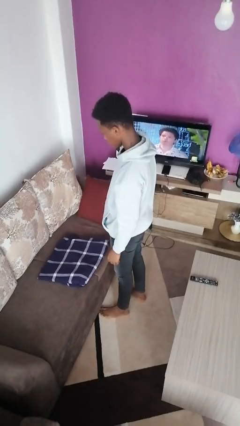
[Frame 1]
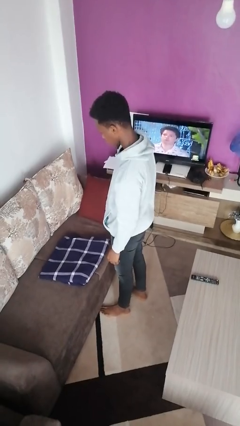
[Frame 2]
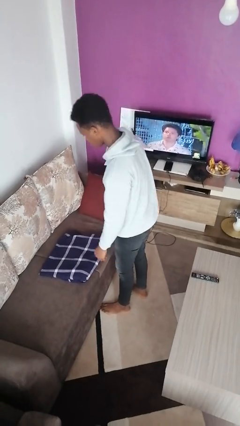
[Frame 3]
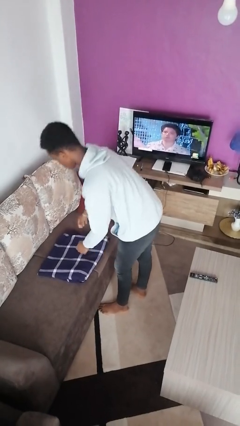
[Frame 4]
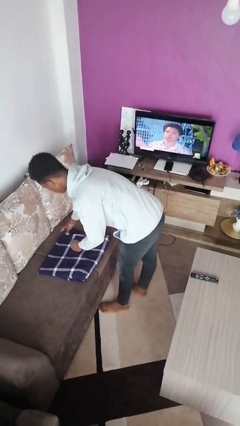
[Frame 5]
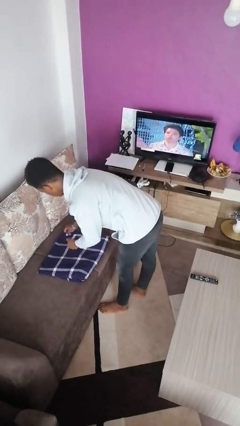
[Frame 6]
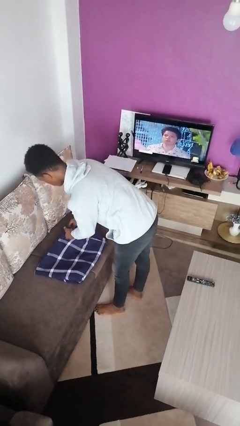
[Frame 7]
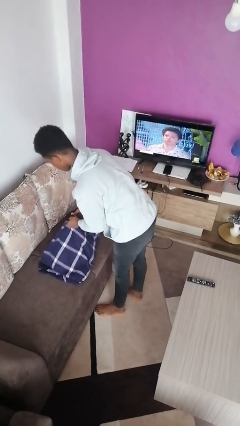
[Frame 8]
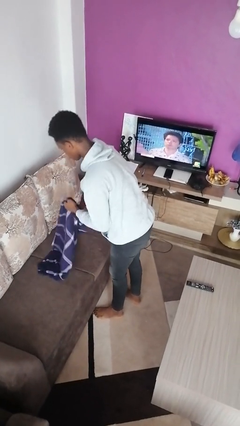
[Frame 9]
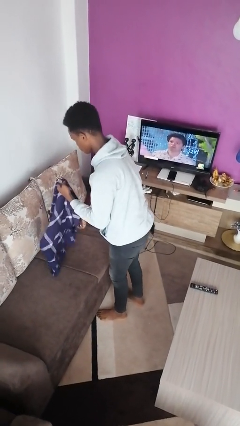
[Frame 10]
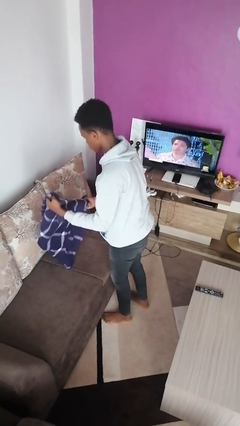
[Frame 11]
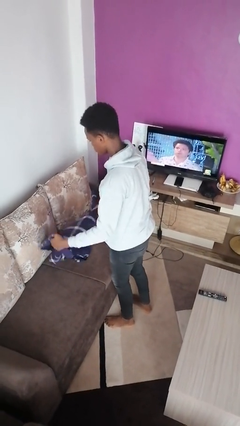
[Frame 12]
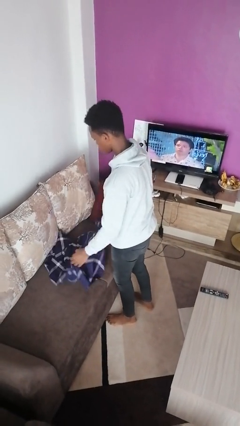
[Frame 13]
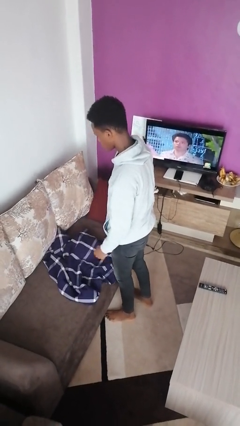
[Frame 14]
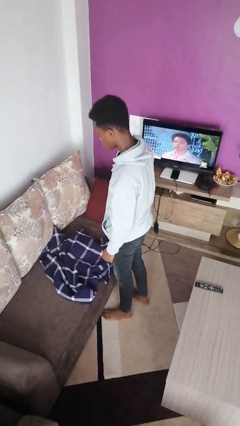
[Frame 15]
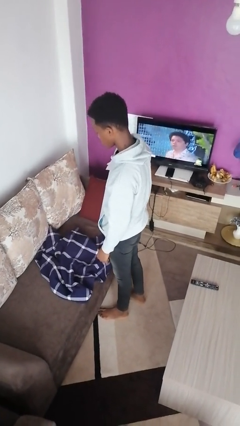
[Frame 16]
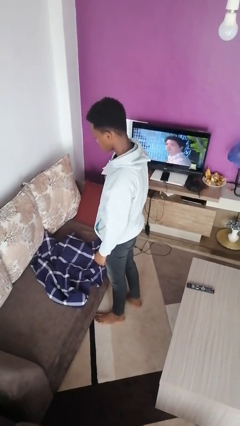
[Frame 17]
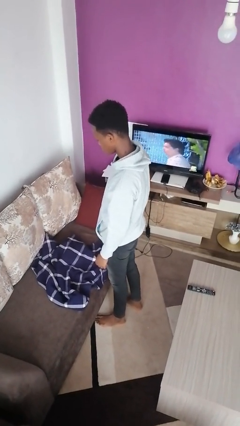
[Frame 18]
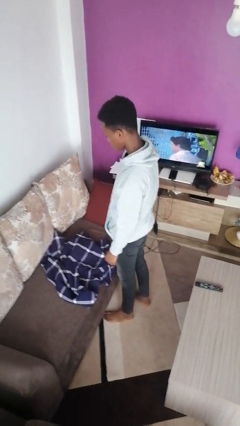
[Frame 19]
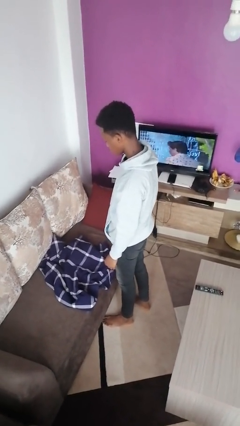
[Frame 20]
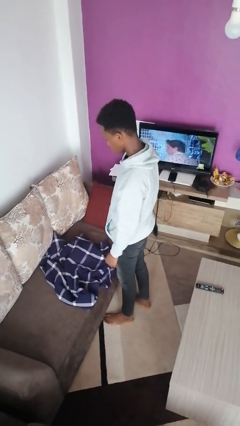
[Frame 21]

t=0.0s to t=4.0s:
person unfolds blanket

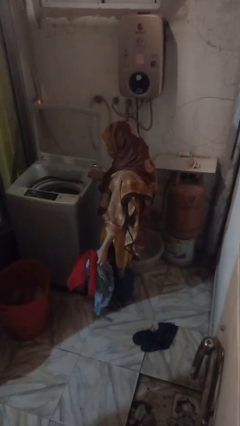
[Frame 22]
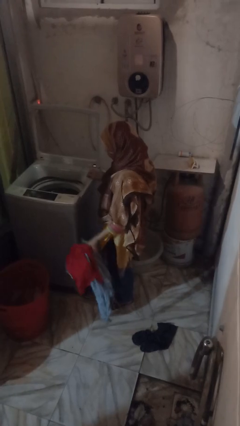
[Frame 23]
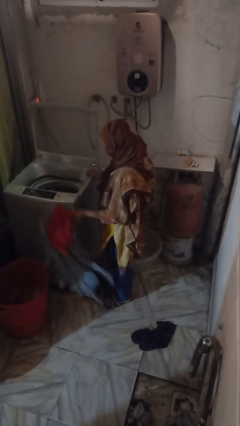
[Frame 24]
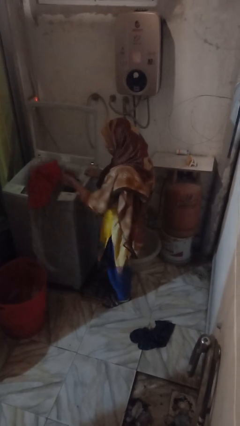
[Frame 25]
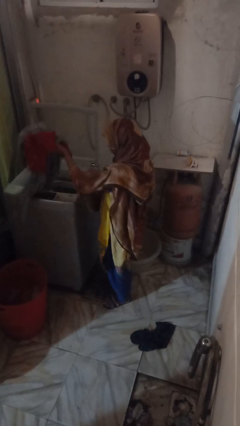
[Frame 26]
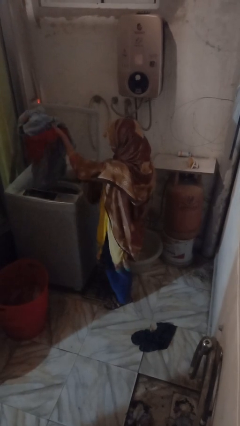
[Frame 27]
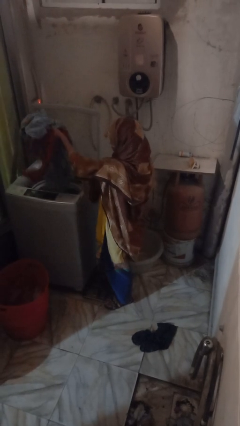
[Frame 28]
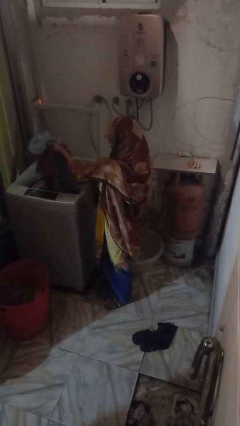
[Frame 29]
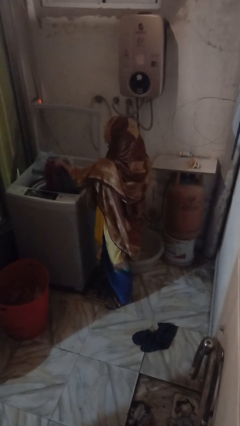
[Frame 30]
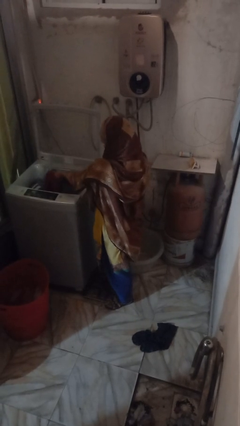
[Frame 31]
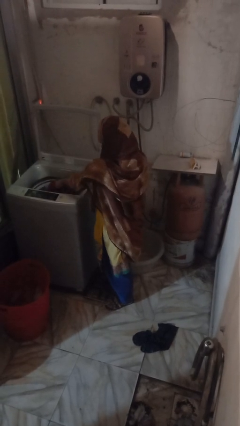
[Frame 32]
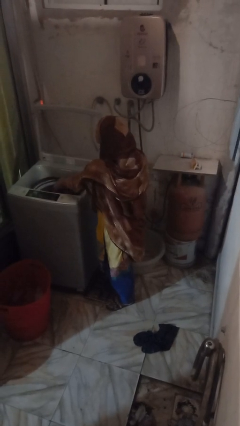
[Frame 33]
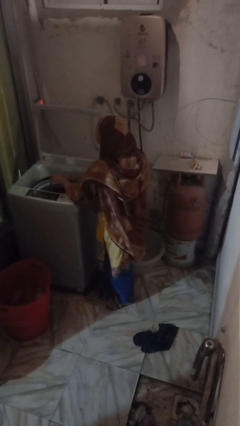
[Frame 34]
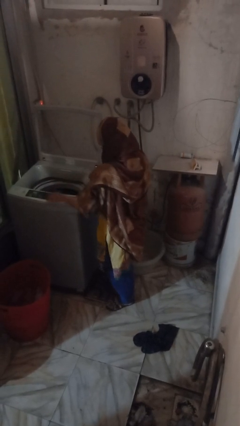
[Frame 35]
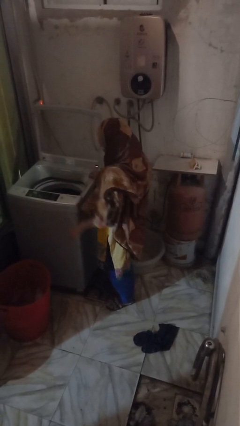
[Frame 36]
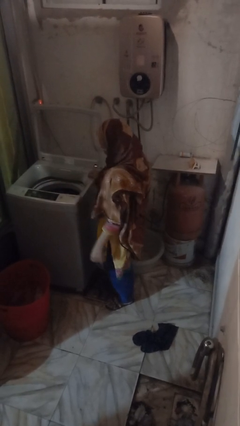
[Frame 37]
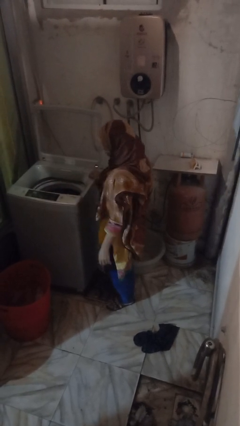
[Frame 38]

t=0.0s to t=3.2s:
person loads clotheswasher

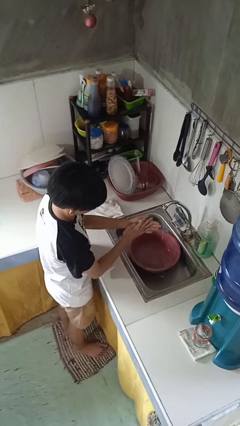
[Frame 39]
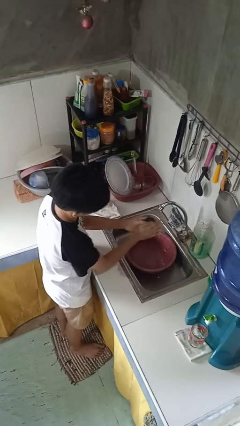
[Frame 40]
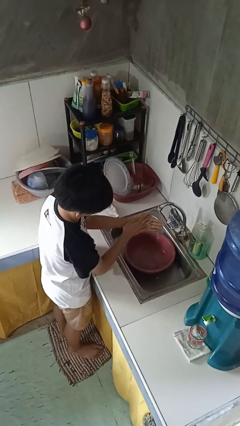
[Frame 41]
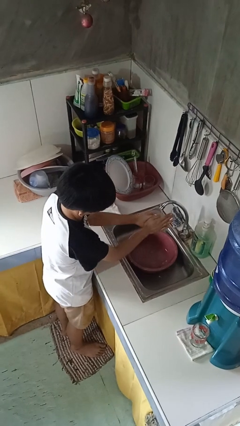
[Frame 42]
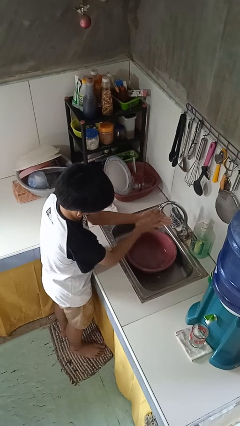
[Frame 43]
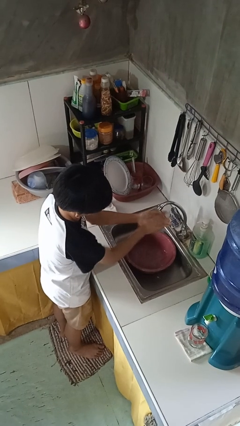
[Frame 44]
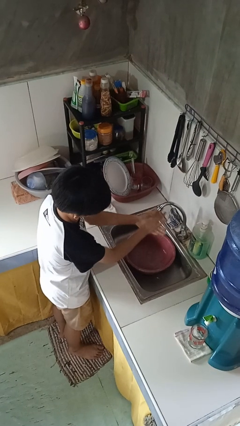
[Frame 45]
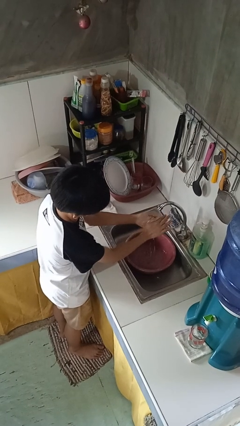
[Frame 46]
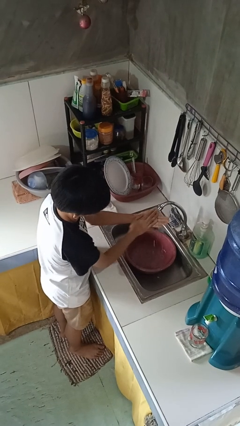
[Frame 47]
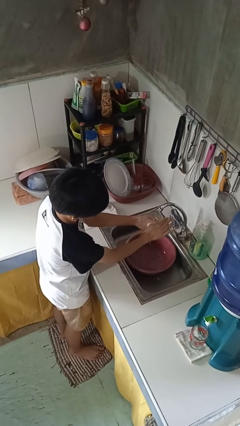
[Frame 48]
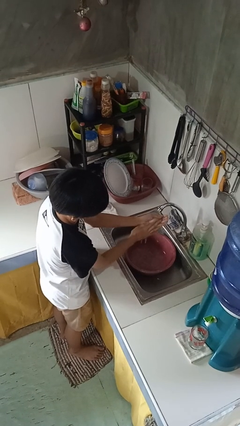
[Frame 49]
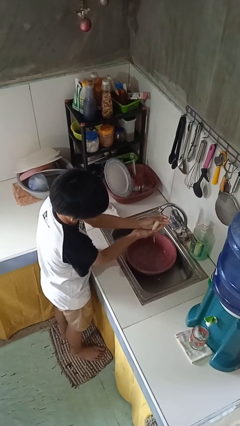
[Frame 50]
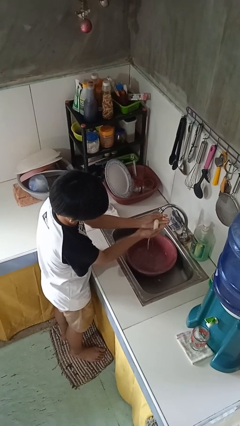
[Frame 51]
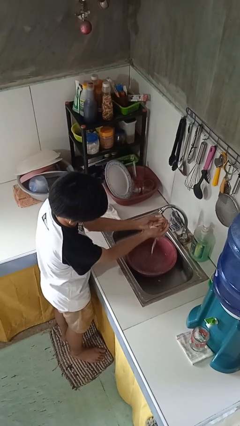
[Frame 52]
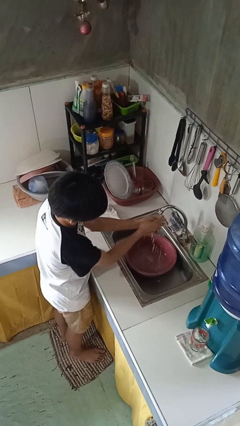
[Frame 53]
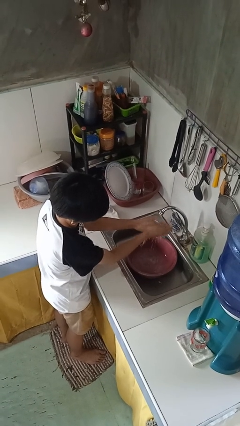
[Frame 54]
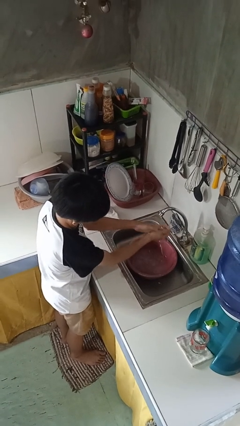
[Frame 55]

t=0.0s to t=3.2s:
person washes hands

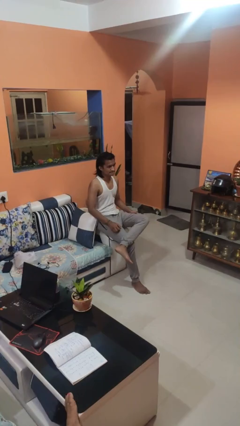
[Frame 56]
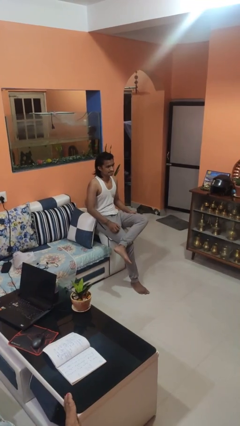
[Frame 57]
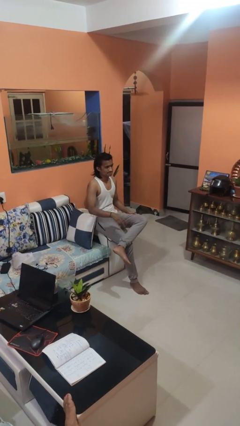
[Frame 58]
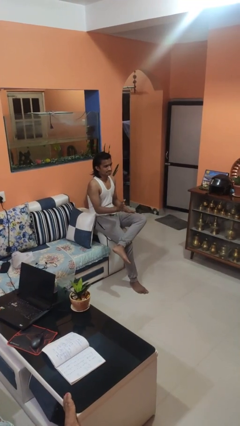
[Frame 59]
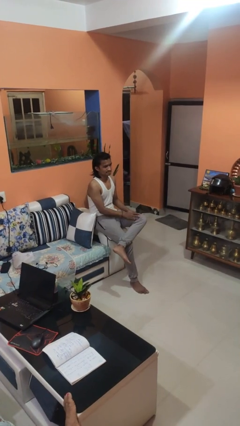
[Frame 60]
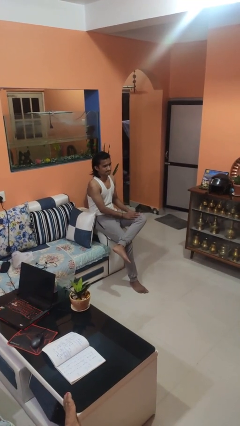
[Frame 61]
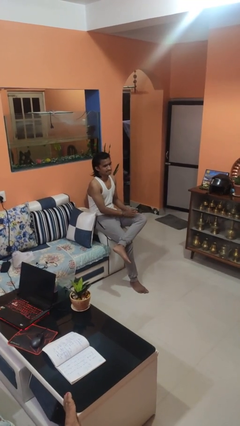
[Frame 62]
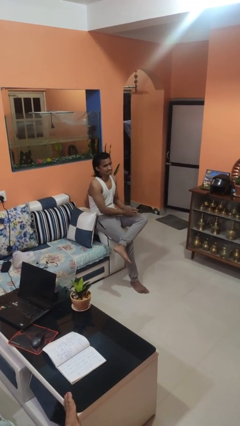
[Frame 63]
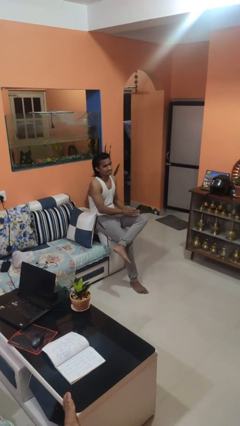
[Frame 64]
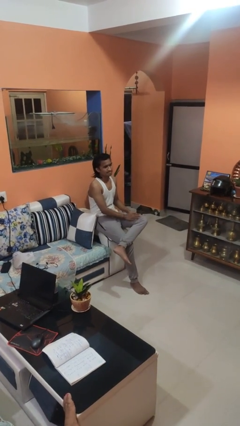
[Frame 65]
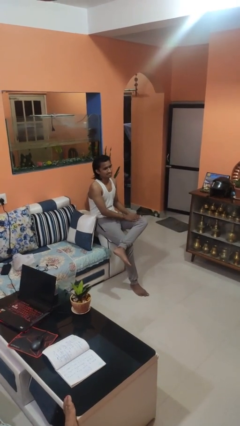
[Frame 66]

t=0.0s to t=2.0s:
person slaps hands on thighs

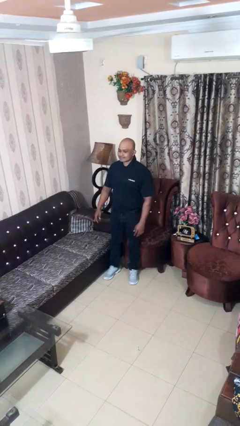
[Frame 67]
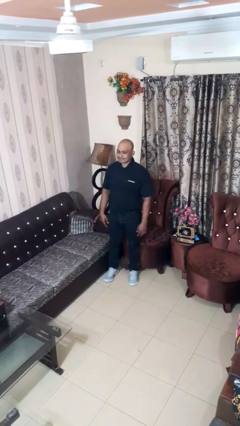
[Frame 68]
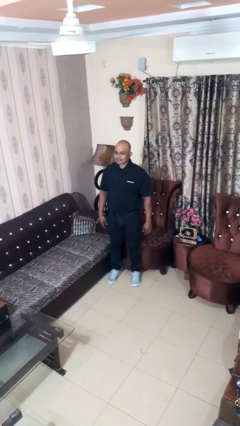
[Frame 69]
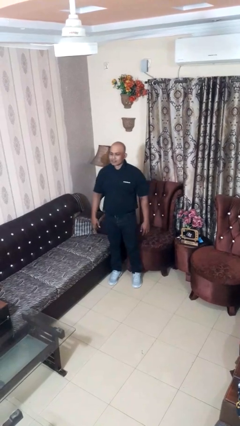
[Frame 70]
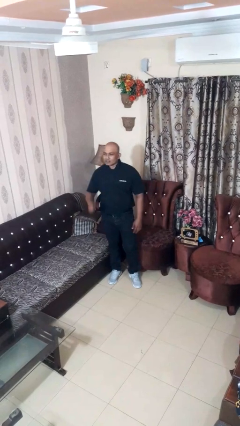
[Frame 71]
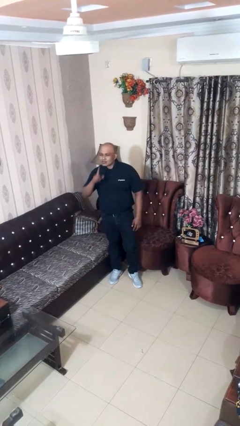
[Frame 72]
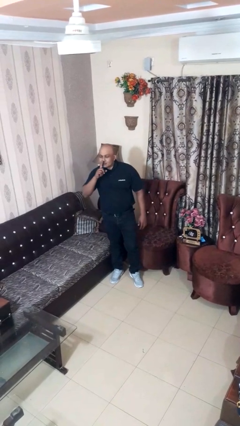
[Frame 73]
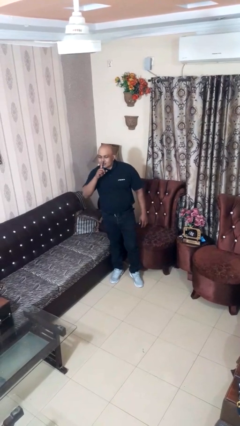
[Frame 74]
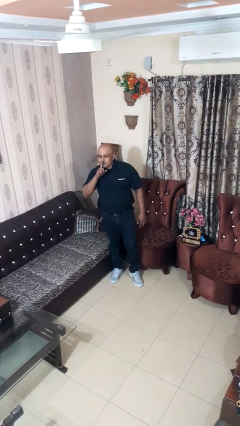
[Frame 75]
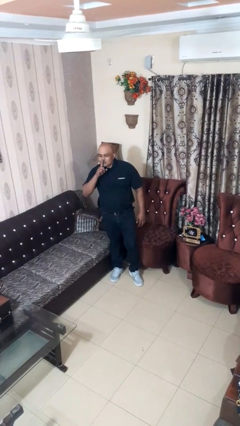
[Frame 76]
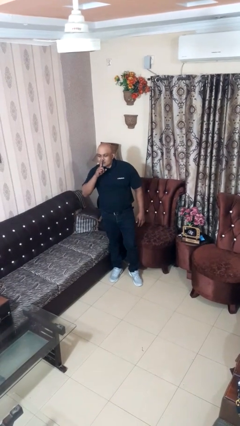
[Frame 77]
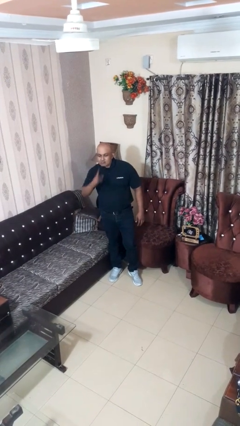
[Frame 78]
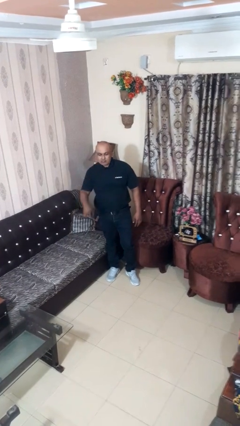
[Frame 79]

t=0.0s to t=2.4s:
person gestures be quiet

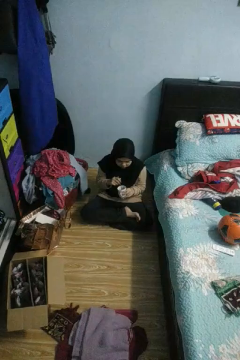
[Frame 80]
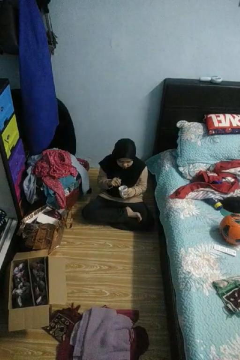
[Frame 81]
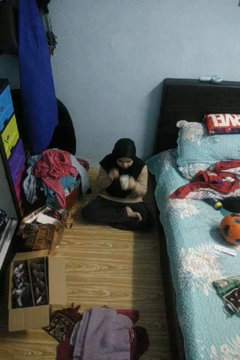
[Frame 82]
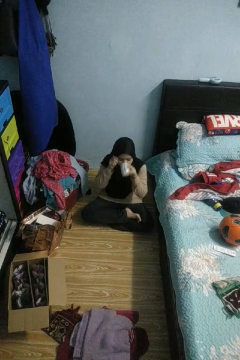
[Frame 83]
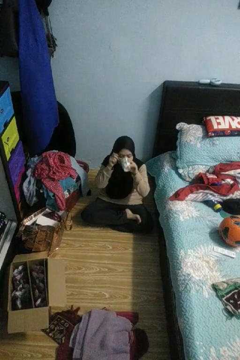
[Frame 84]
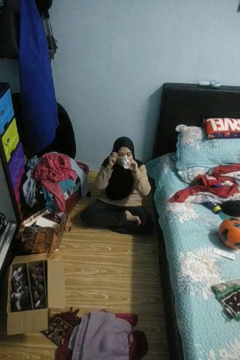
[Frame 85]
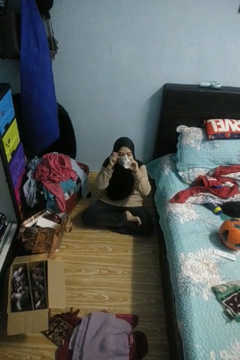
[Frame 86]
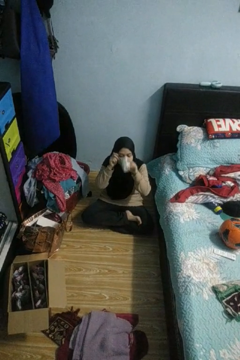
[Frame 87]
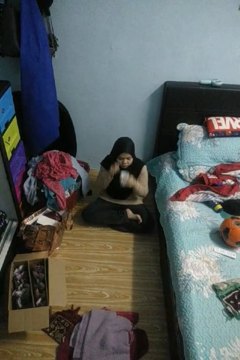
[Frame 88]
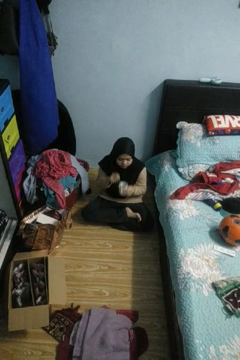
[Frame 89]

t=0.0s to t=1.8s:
person drinks from mug

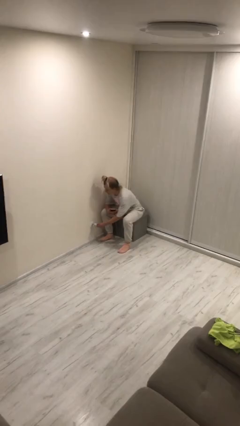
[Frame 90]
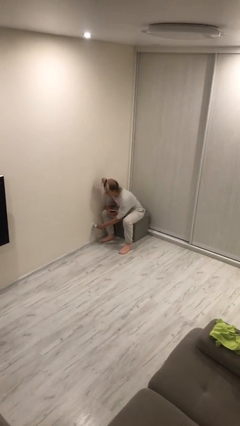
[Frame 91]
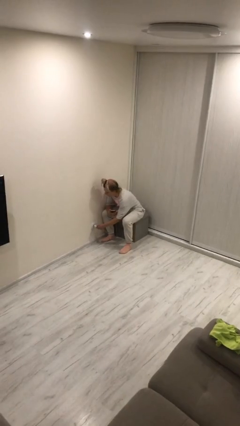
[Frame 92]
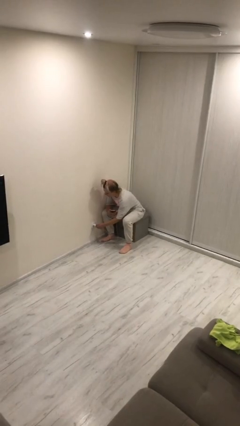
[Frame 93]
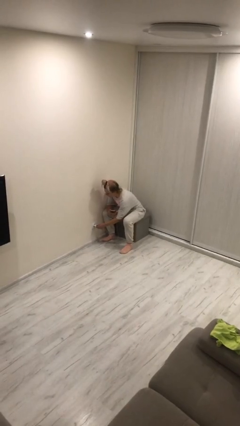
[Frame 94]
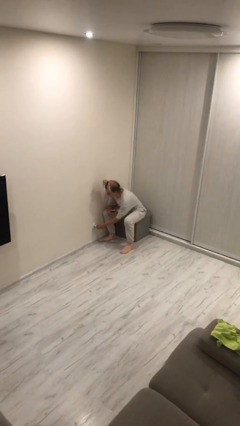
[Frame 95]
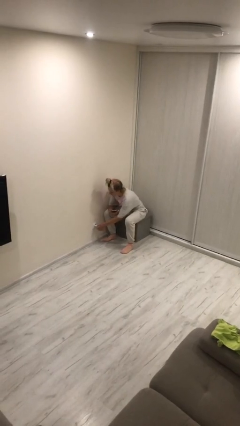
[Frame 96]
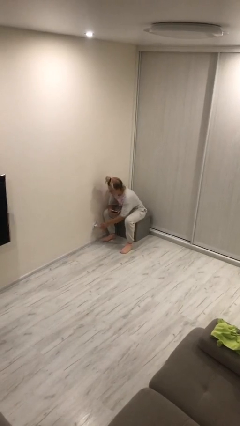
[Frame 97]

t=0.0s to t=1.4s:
person plugs into electrical socket
